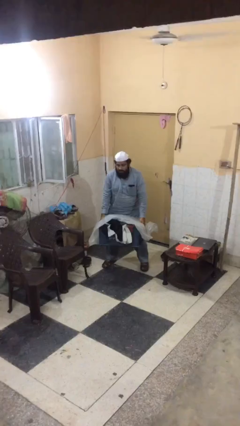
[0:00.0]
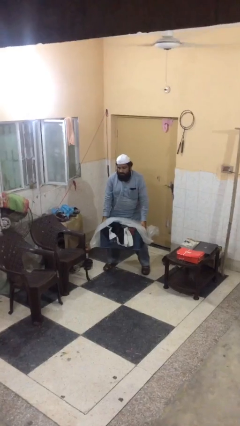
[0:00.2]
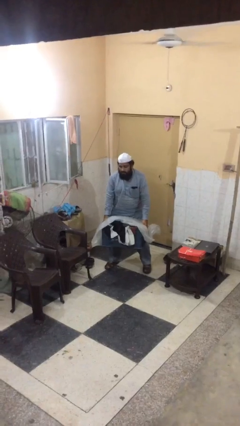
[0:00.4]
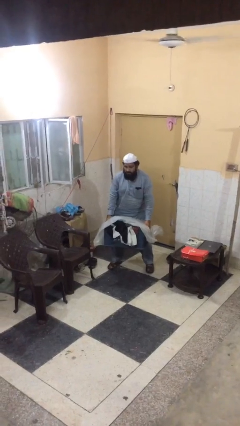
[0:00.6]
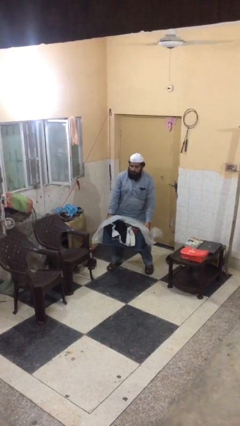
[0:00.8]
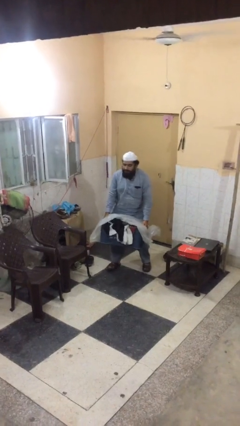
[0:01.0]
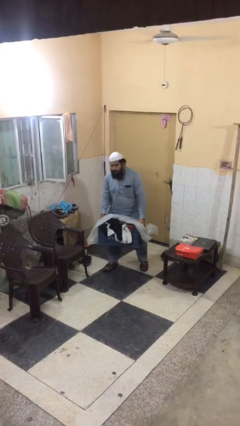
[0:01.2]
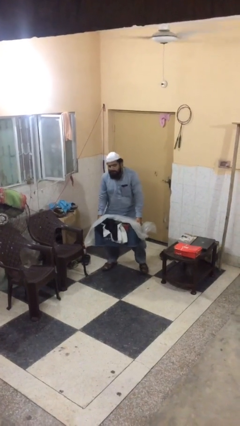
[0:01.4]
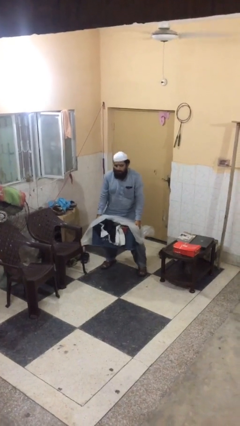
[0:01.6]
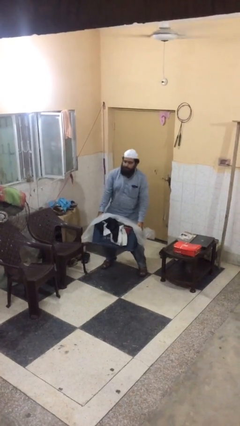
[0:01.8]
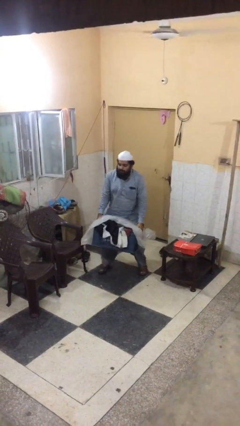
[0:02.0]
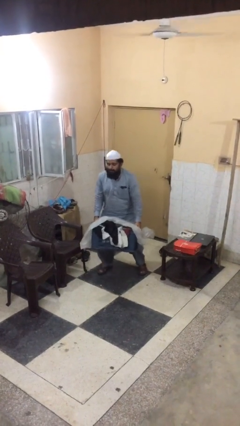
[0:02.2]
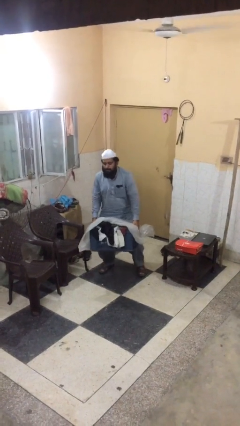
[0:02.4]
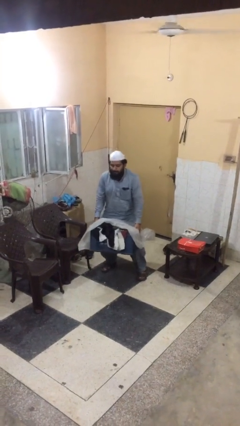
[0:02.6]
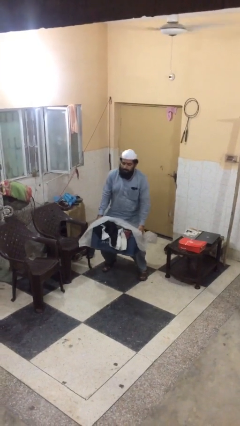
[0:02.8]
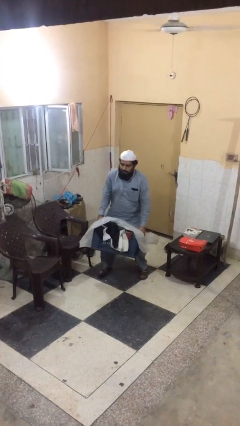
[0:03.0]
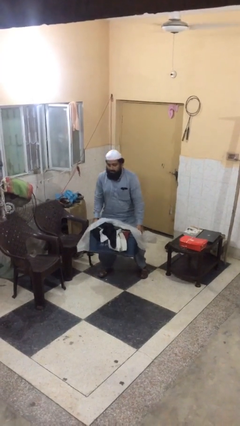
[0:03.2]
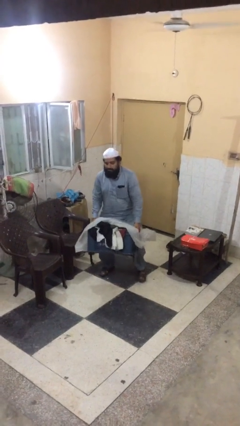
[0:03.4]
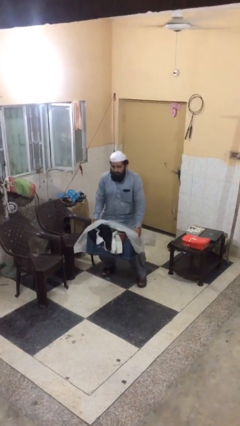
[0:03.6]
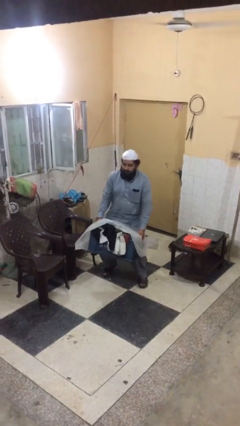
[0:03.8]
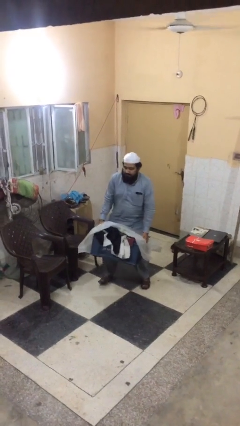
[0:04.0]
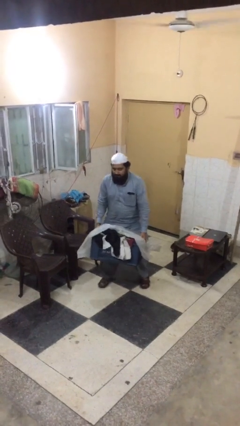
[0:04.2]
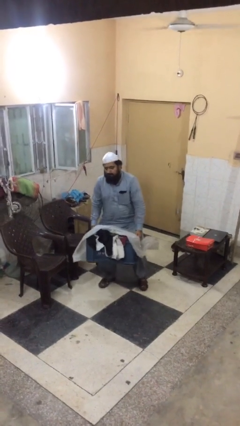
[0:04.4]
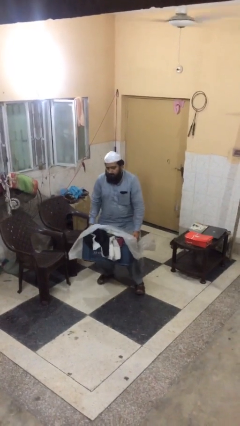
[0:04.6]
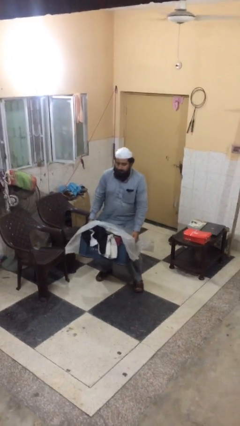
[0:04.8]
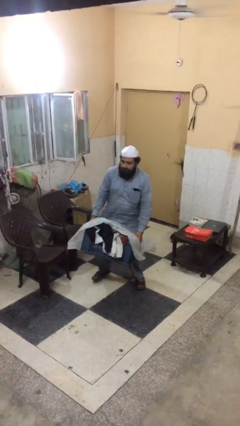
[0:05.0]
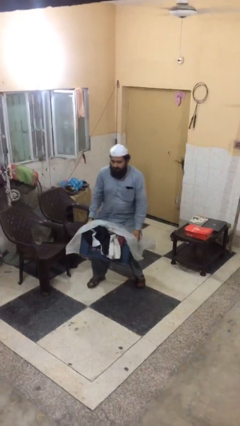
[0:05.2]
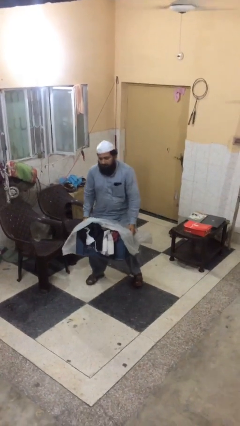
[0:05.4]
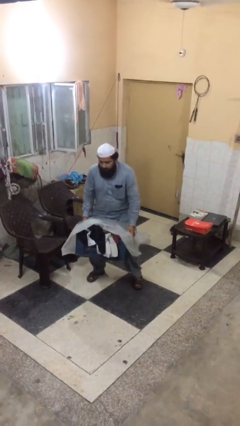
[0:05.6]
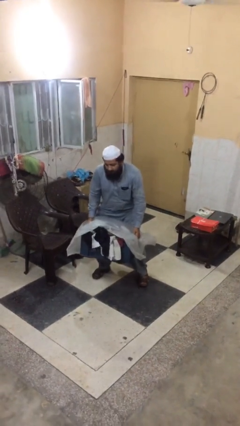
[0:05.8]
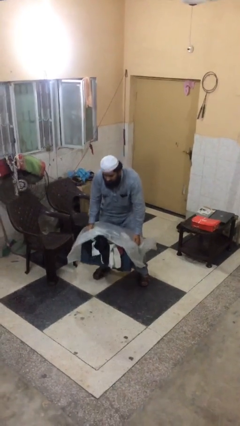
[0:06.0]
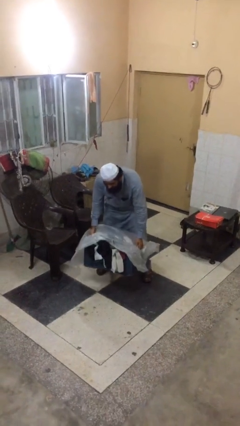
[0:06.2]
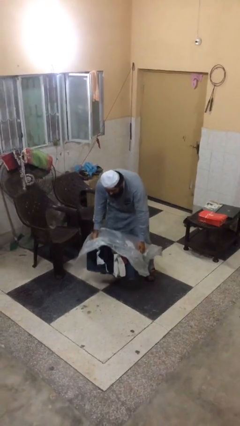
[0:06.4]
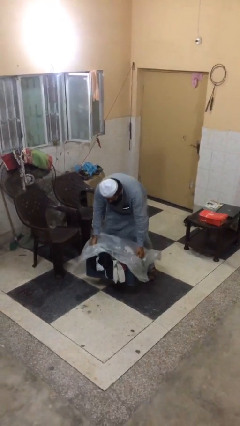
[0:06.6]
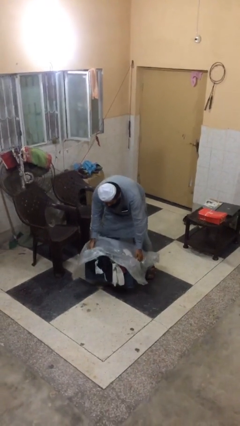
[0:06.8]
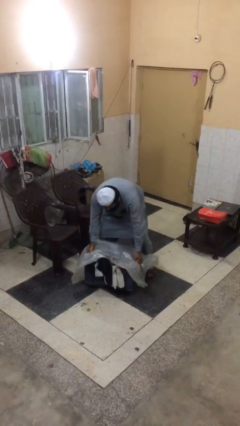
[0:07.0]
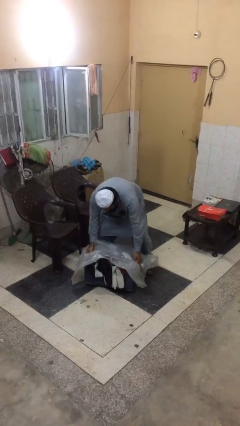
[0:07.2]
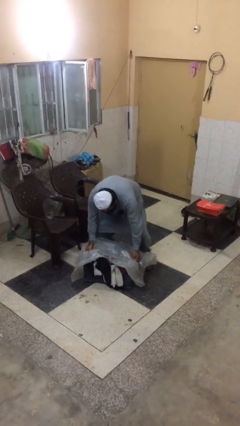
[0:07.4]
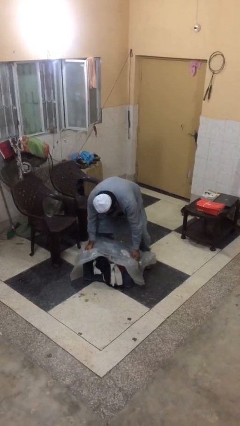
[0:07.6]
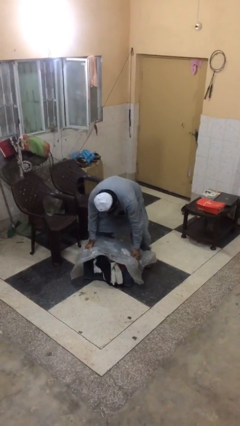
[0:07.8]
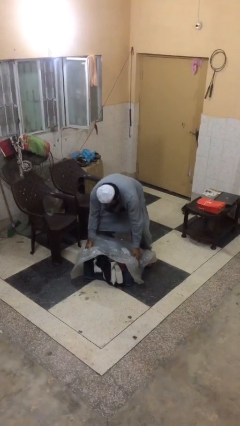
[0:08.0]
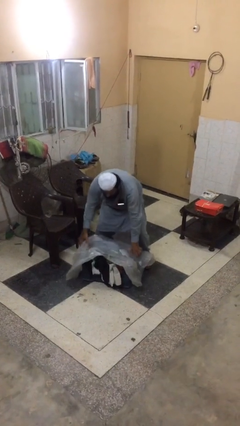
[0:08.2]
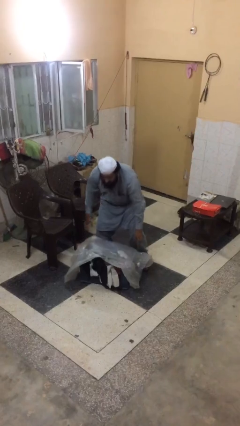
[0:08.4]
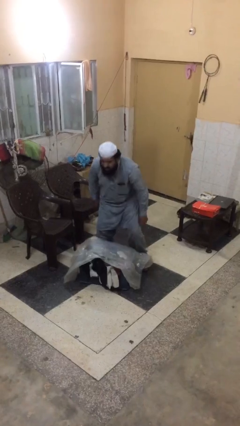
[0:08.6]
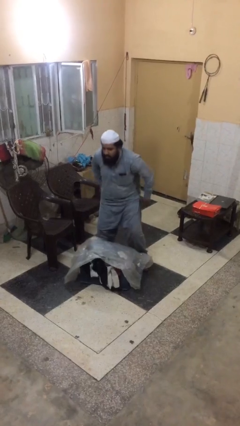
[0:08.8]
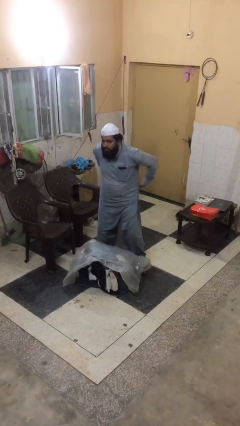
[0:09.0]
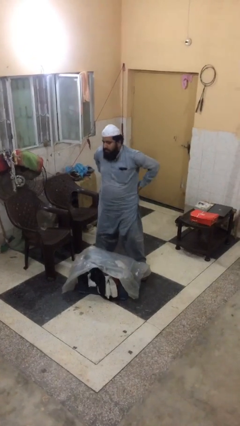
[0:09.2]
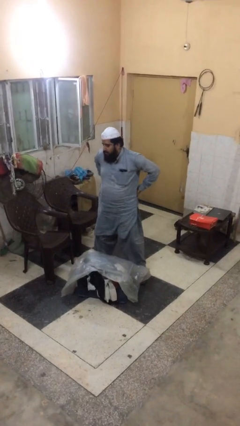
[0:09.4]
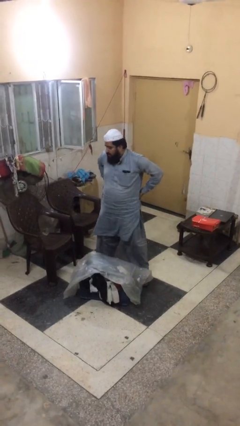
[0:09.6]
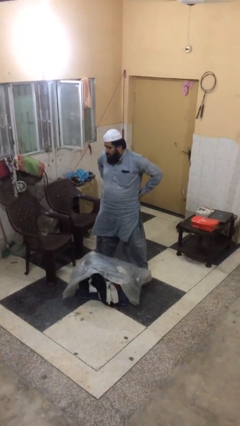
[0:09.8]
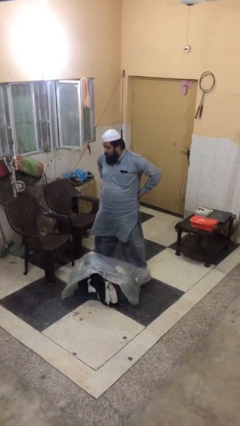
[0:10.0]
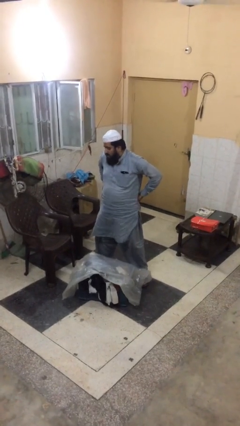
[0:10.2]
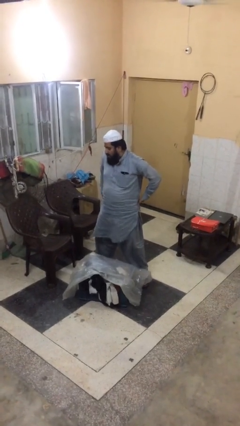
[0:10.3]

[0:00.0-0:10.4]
person carries heavy object

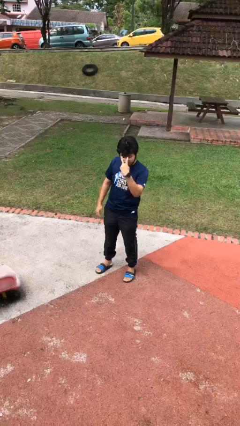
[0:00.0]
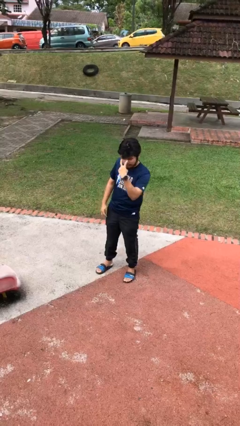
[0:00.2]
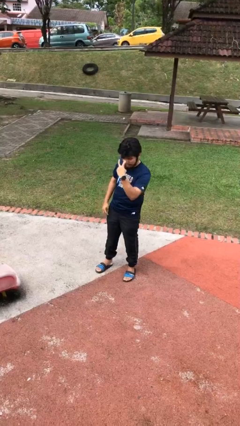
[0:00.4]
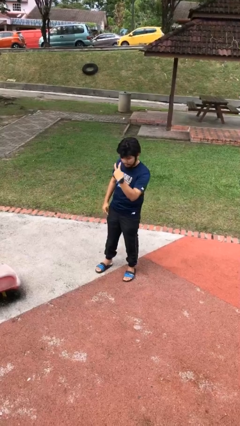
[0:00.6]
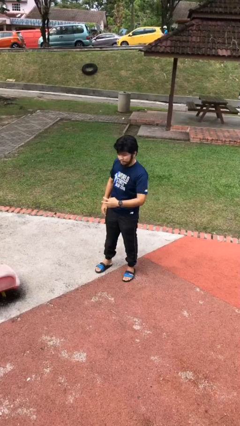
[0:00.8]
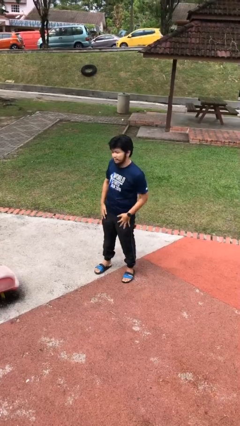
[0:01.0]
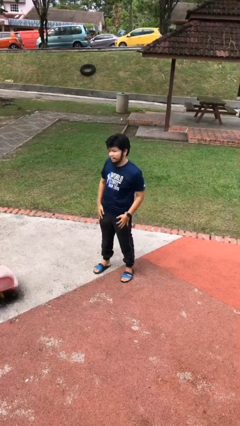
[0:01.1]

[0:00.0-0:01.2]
person gestures watch closely

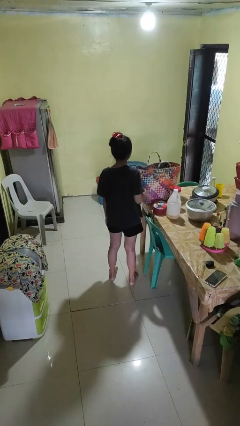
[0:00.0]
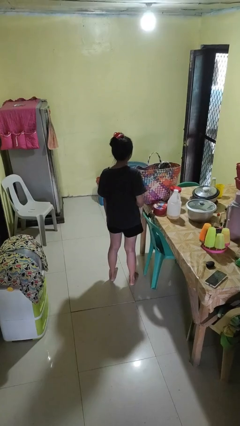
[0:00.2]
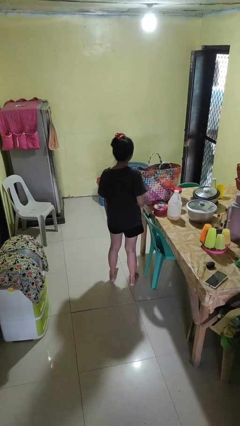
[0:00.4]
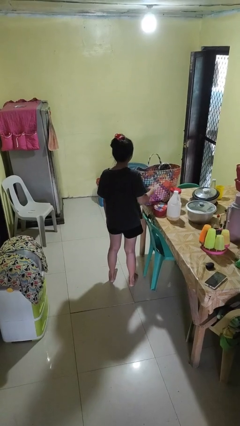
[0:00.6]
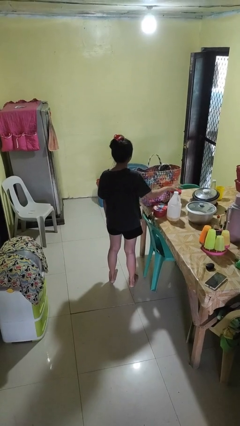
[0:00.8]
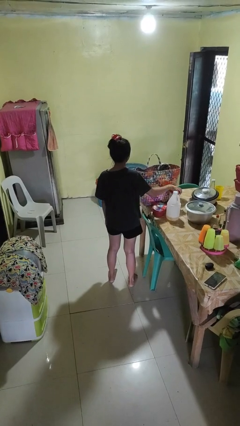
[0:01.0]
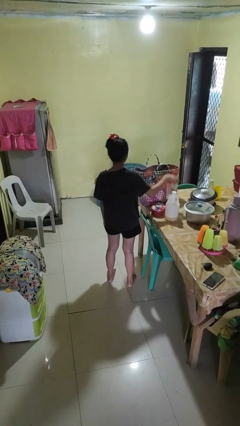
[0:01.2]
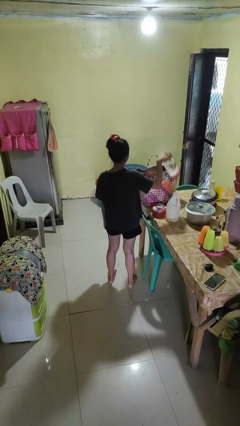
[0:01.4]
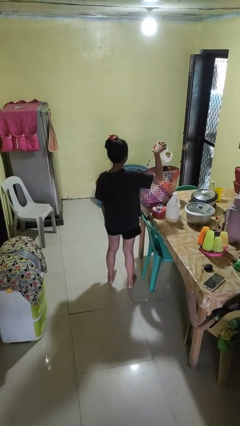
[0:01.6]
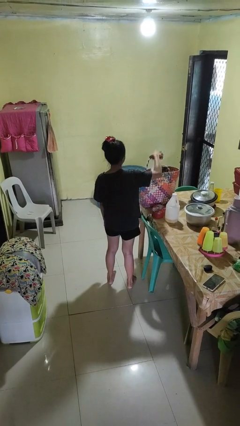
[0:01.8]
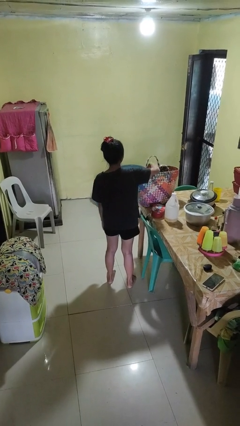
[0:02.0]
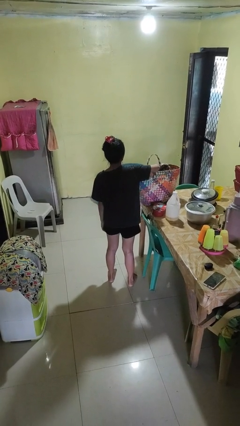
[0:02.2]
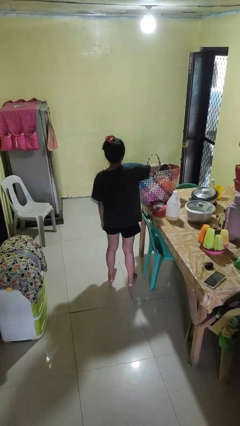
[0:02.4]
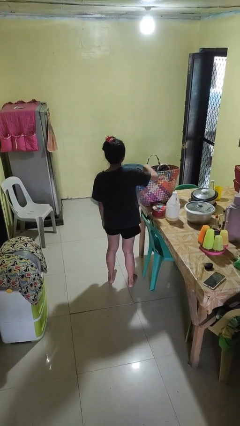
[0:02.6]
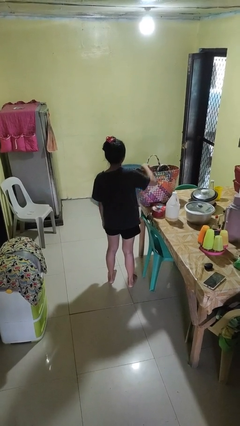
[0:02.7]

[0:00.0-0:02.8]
person puts object into basket

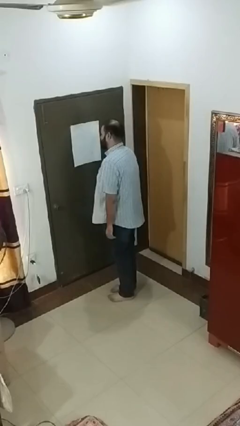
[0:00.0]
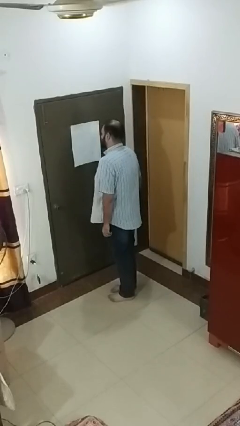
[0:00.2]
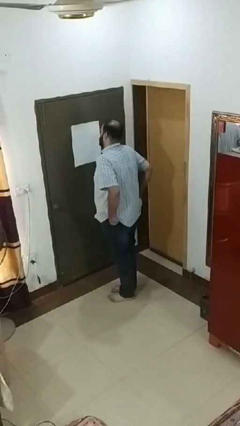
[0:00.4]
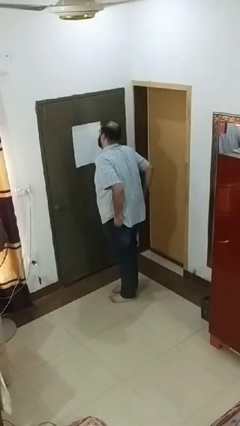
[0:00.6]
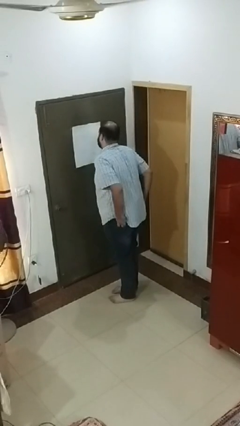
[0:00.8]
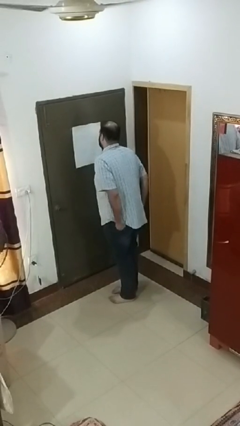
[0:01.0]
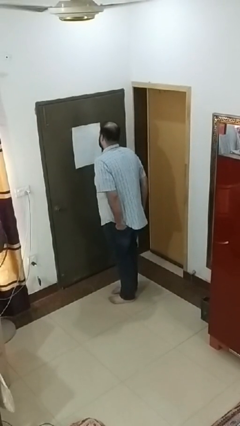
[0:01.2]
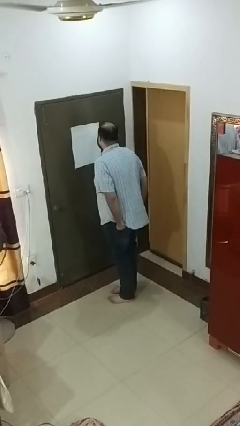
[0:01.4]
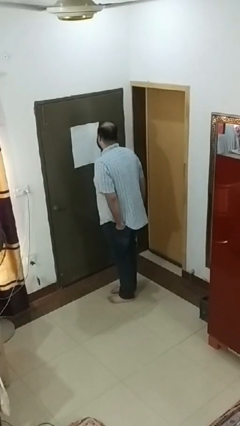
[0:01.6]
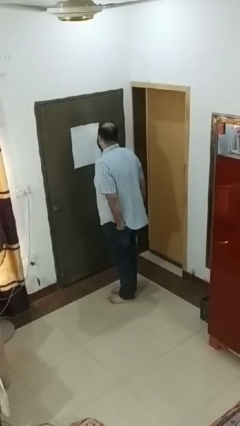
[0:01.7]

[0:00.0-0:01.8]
person puts hands in back pockets

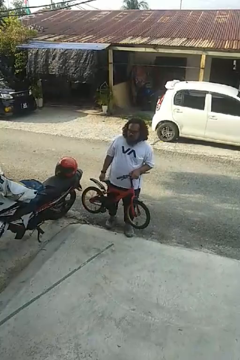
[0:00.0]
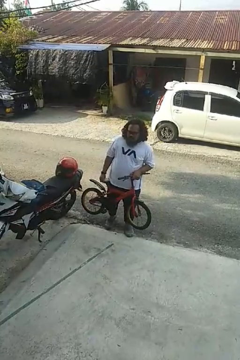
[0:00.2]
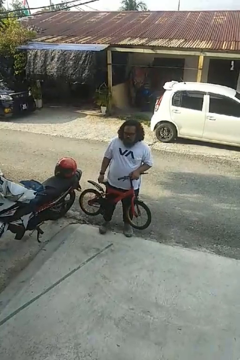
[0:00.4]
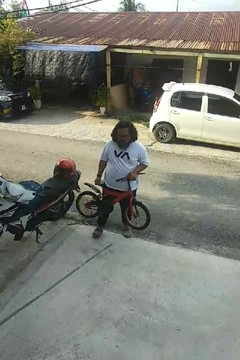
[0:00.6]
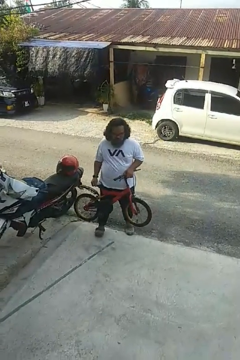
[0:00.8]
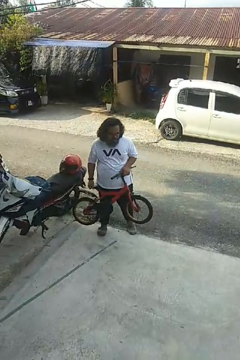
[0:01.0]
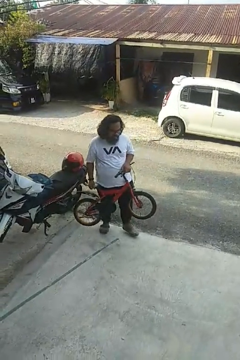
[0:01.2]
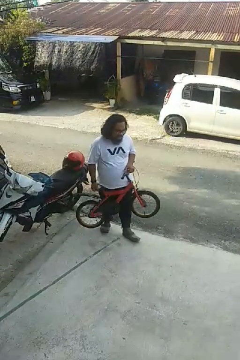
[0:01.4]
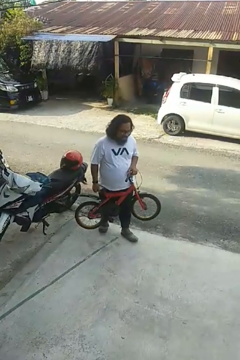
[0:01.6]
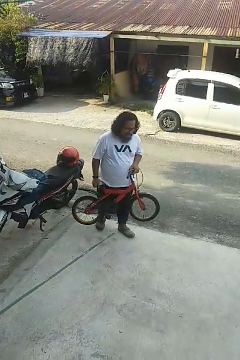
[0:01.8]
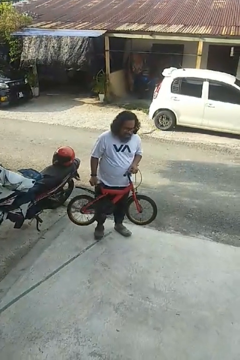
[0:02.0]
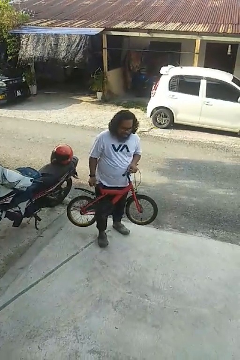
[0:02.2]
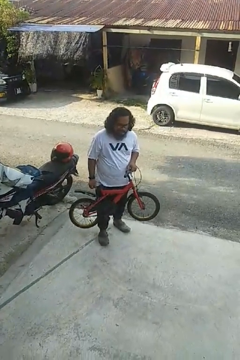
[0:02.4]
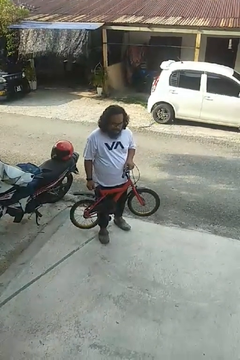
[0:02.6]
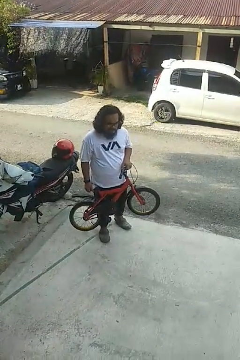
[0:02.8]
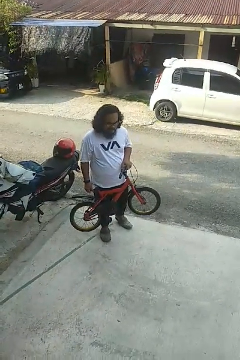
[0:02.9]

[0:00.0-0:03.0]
person carries bicycle
